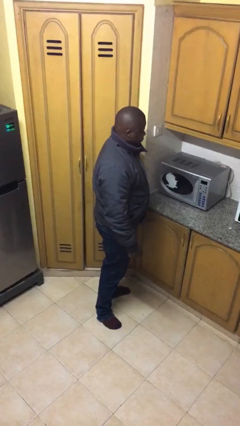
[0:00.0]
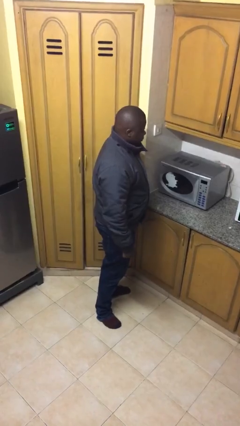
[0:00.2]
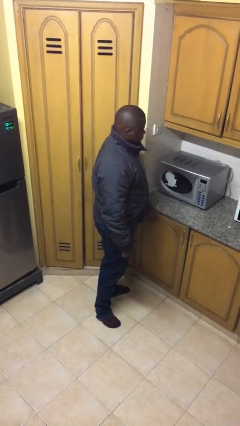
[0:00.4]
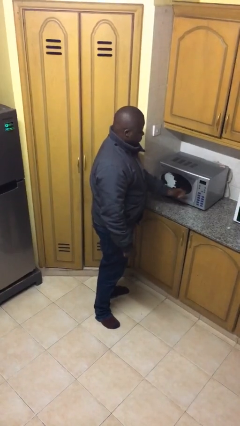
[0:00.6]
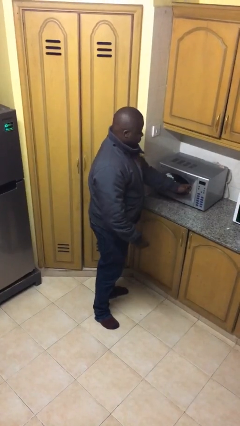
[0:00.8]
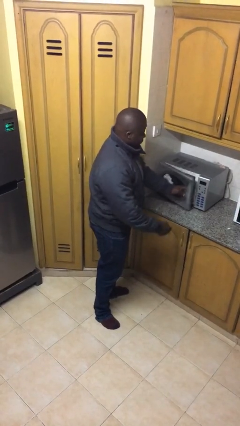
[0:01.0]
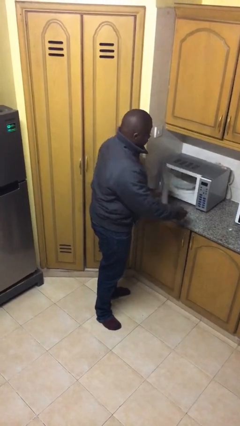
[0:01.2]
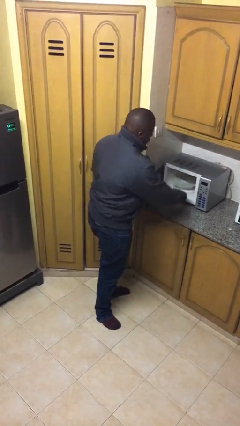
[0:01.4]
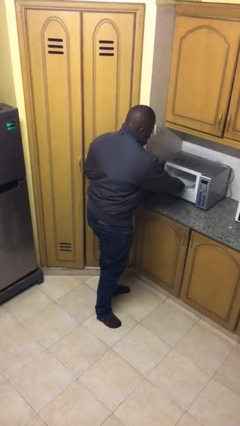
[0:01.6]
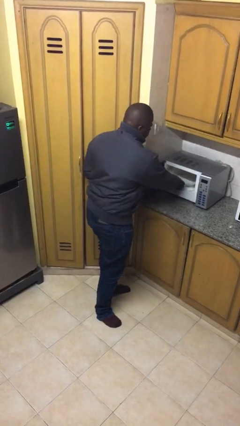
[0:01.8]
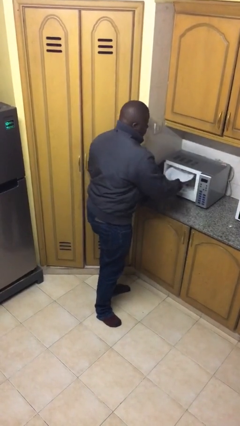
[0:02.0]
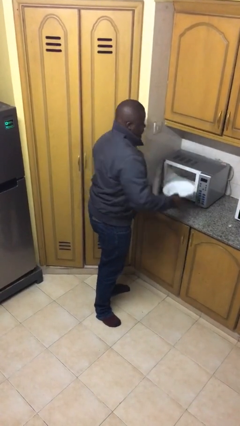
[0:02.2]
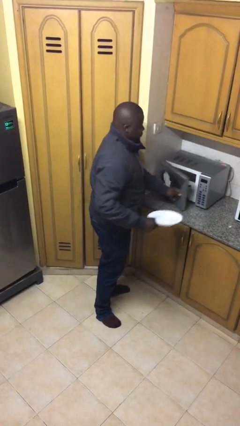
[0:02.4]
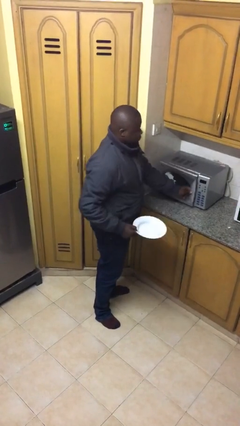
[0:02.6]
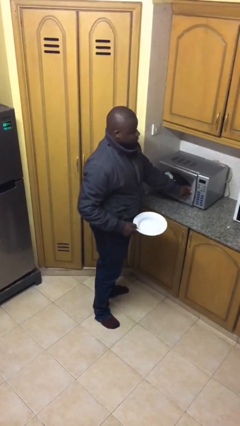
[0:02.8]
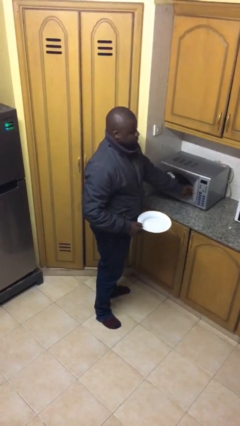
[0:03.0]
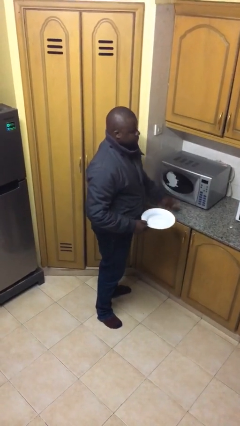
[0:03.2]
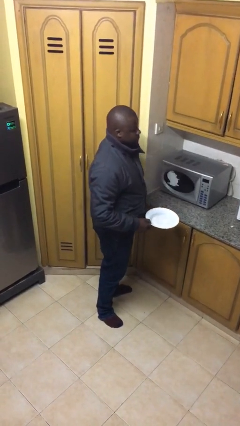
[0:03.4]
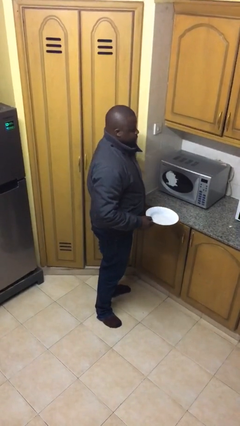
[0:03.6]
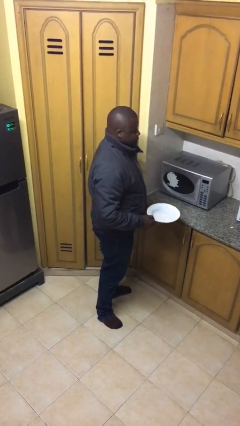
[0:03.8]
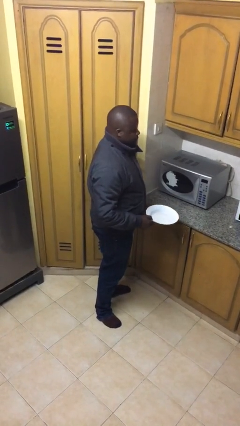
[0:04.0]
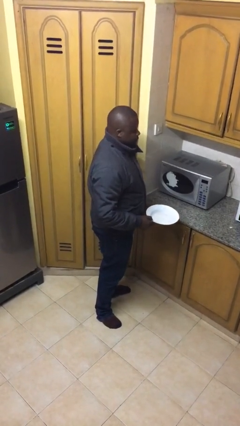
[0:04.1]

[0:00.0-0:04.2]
person takes object from microwave

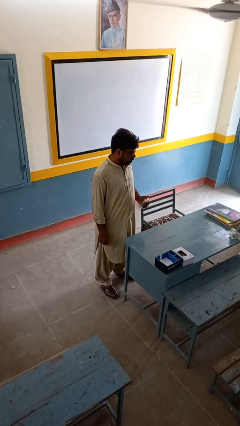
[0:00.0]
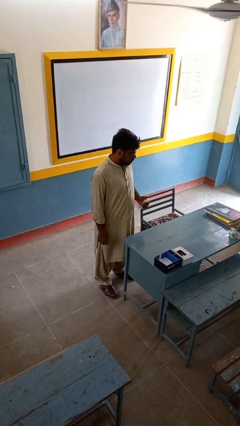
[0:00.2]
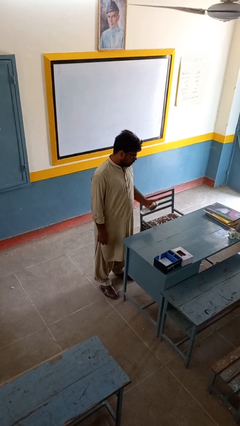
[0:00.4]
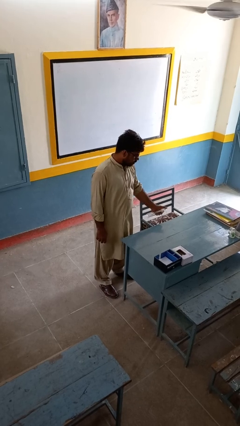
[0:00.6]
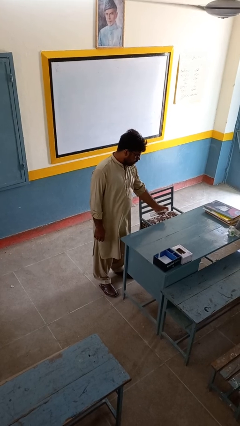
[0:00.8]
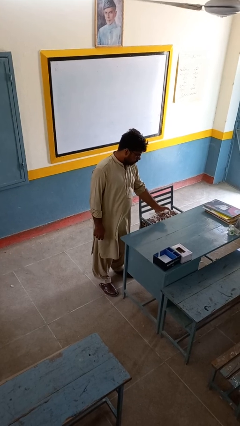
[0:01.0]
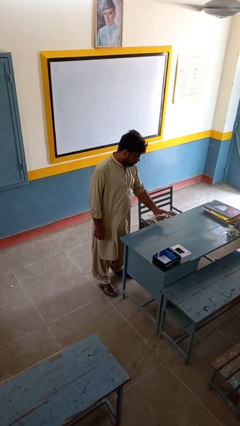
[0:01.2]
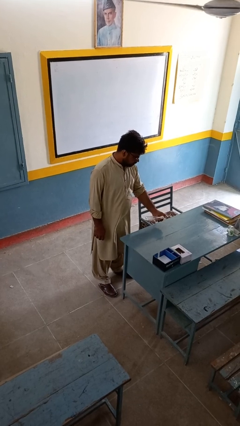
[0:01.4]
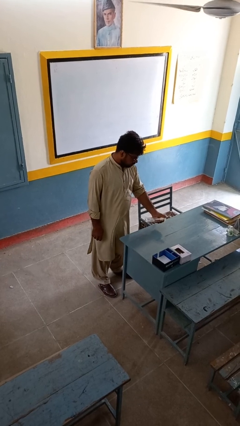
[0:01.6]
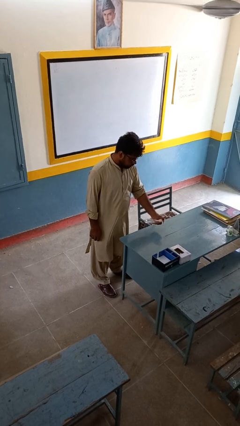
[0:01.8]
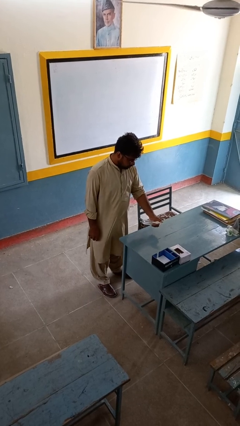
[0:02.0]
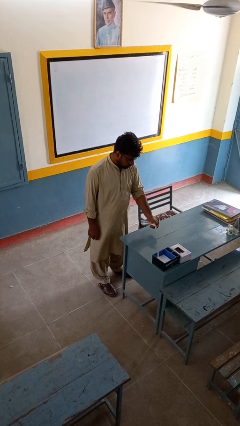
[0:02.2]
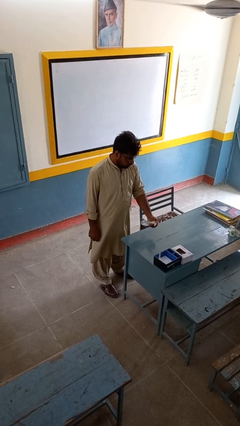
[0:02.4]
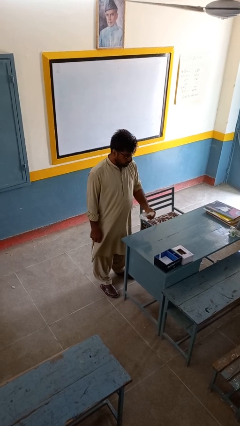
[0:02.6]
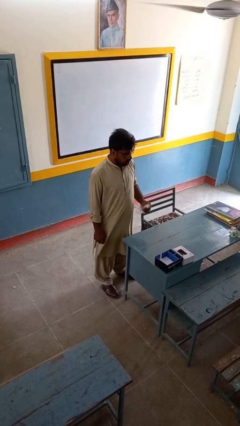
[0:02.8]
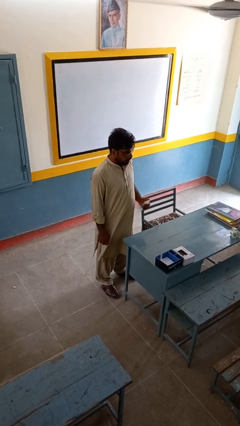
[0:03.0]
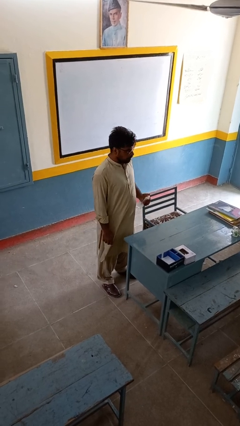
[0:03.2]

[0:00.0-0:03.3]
person sprays from bottle

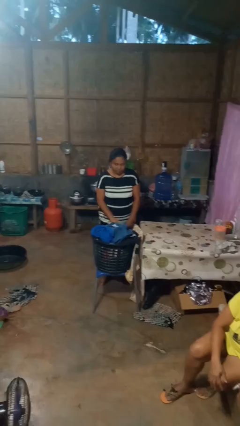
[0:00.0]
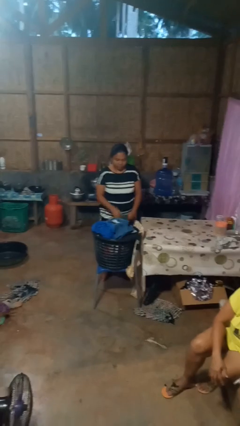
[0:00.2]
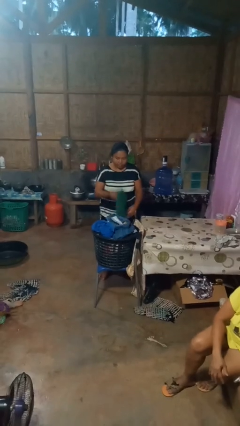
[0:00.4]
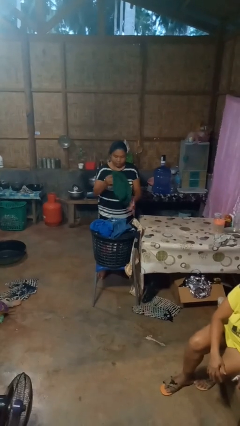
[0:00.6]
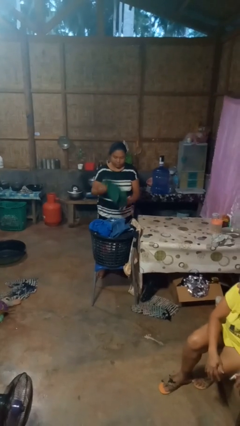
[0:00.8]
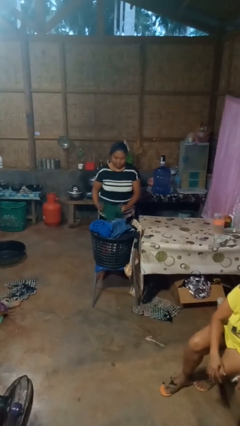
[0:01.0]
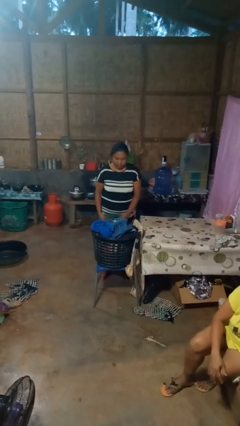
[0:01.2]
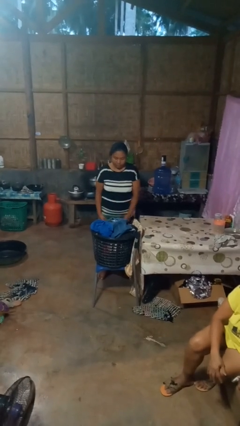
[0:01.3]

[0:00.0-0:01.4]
person takes object from basket

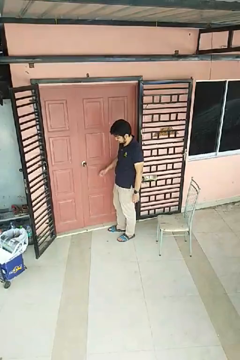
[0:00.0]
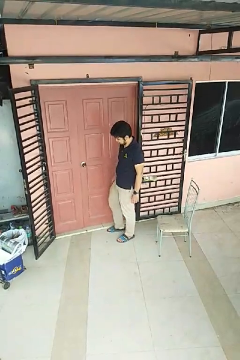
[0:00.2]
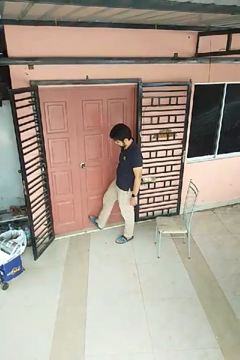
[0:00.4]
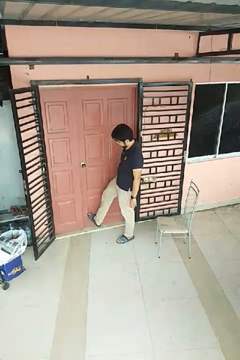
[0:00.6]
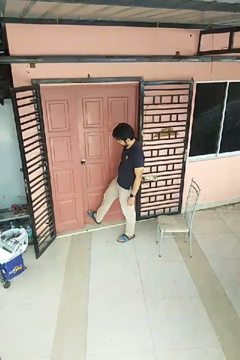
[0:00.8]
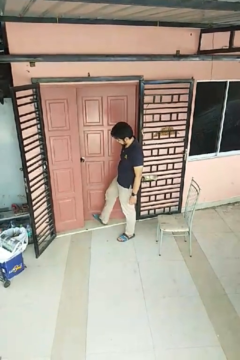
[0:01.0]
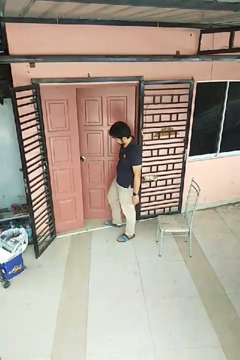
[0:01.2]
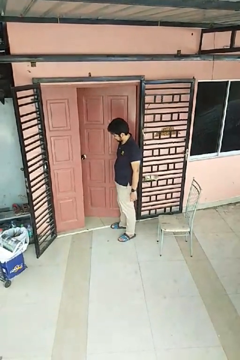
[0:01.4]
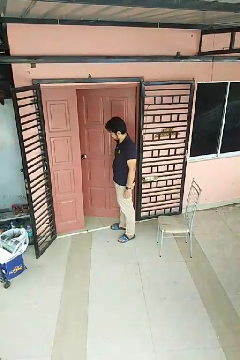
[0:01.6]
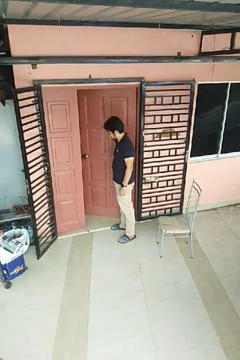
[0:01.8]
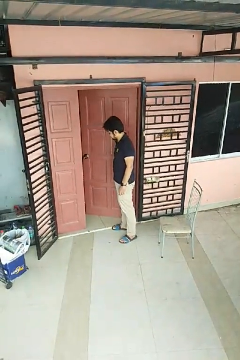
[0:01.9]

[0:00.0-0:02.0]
person opens facility door

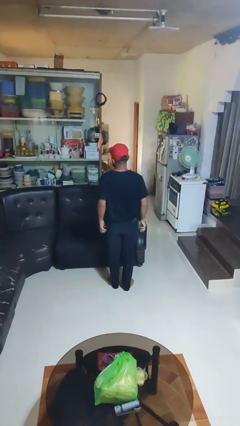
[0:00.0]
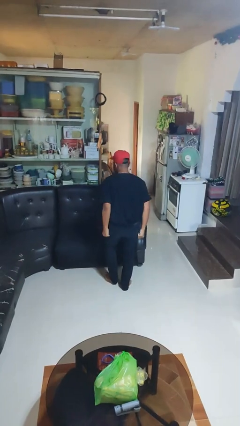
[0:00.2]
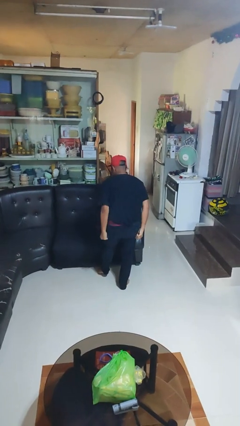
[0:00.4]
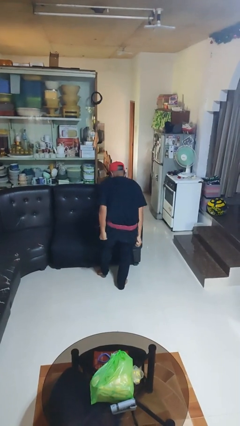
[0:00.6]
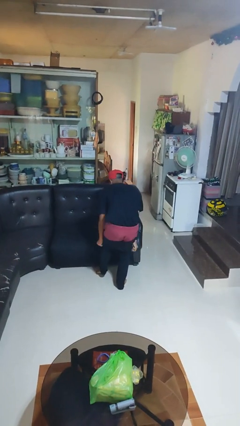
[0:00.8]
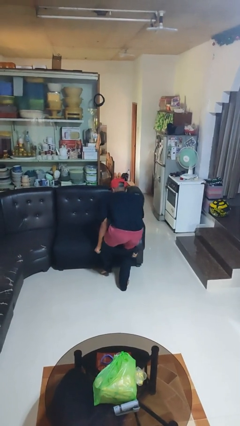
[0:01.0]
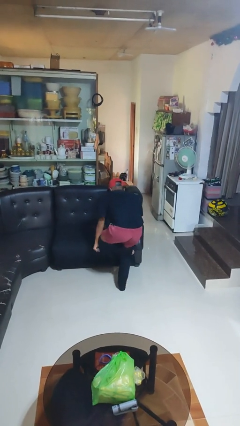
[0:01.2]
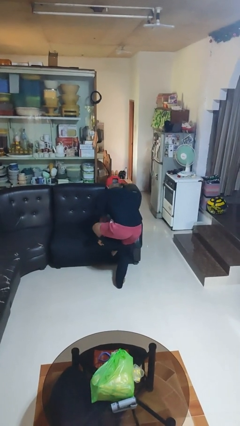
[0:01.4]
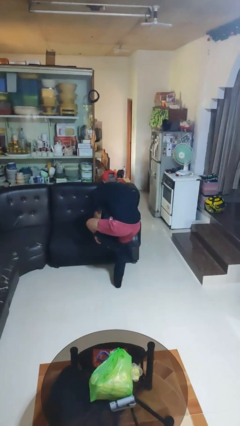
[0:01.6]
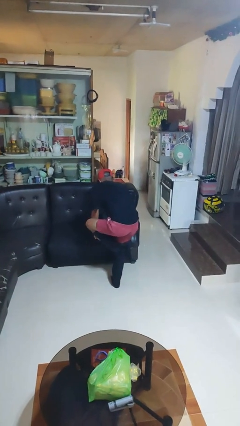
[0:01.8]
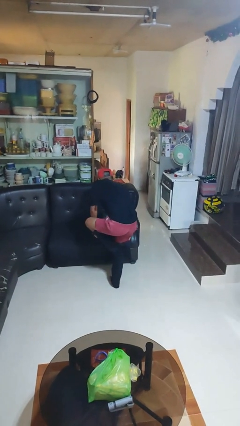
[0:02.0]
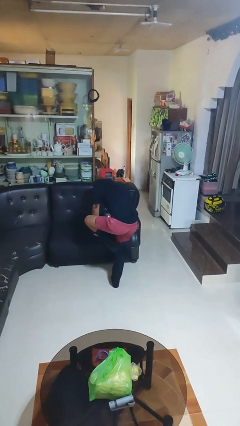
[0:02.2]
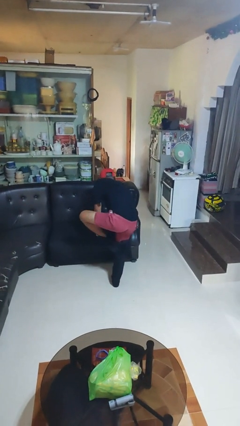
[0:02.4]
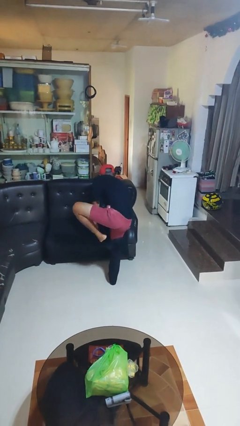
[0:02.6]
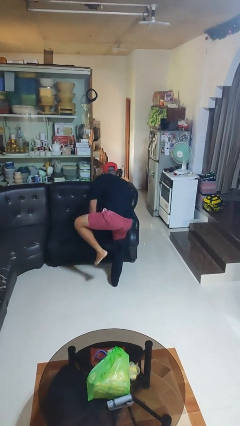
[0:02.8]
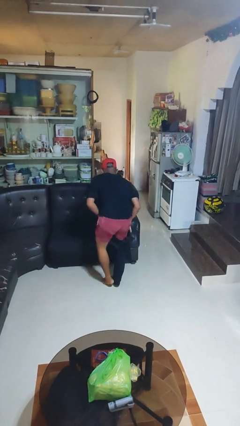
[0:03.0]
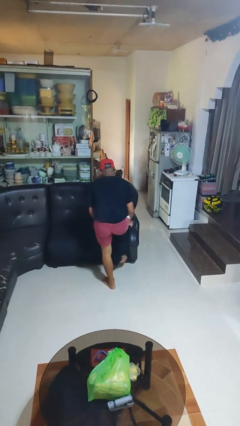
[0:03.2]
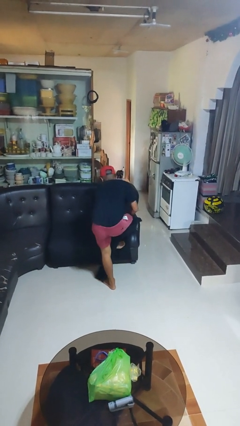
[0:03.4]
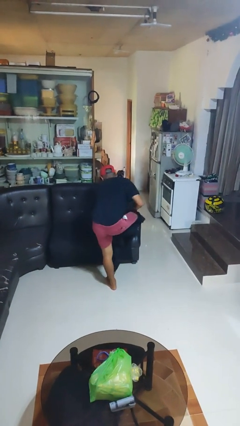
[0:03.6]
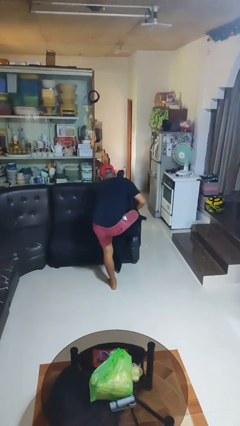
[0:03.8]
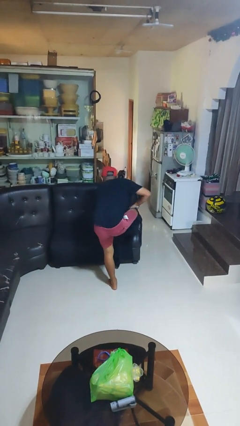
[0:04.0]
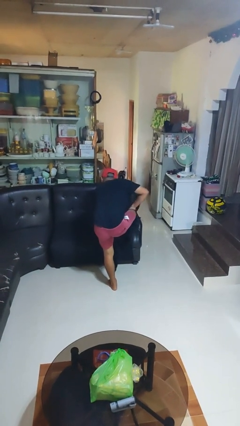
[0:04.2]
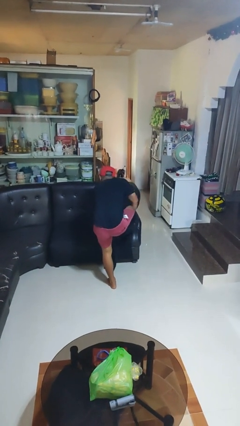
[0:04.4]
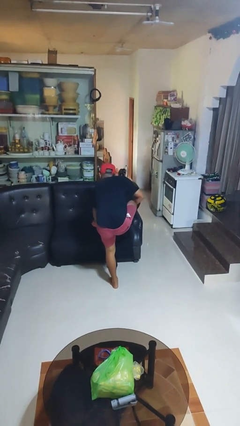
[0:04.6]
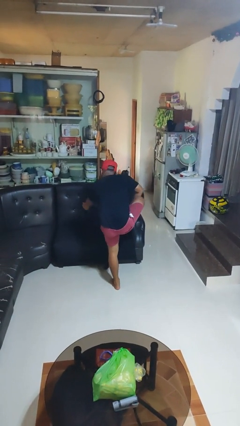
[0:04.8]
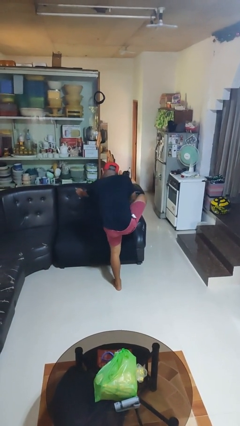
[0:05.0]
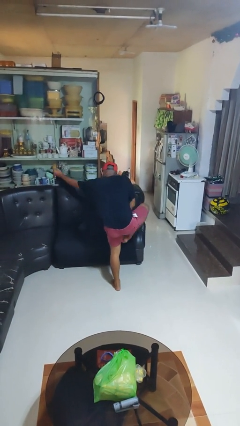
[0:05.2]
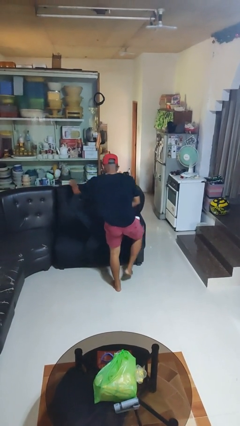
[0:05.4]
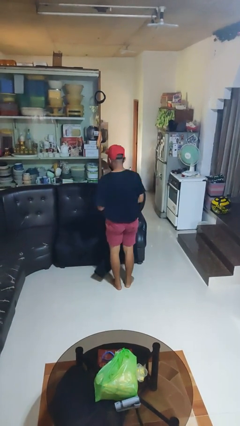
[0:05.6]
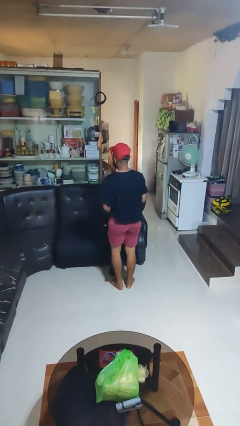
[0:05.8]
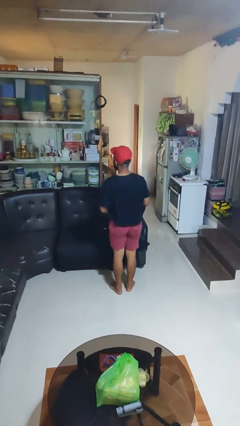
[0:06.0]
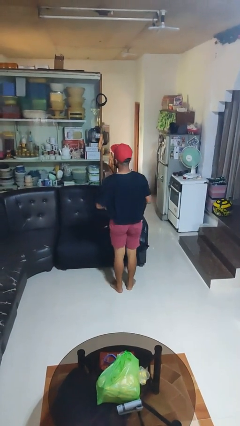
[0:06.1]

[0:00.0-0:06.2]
person takes off pants

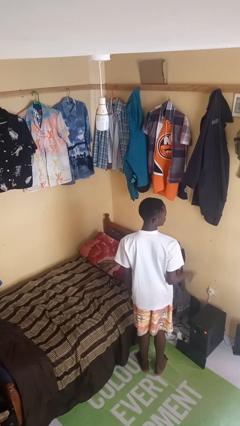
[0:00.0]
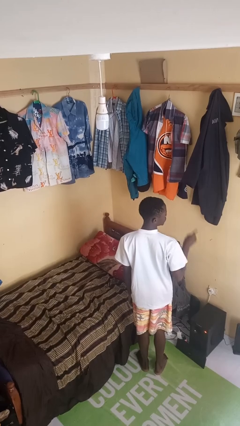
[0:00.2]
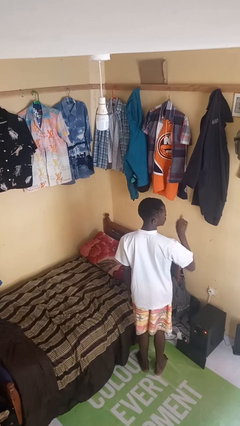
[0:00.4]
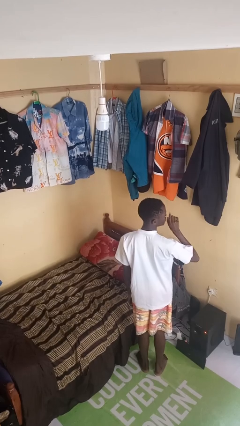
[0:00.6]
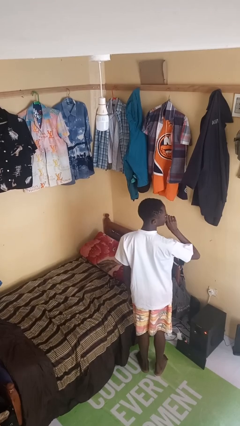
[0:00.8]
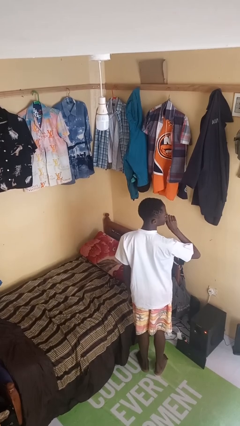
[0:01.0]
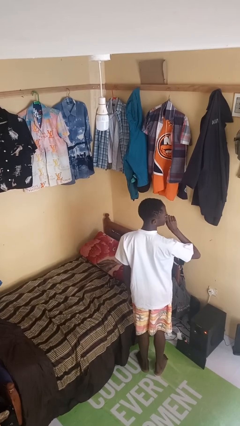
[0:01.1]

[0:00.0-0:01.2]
person gestures be quiet
